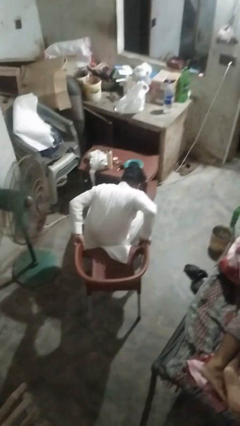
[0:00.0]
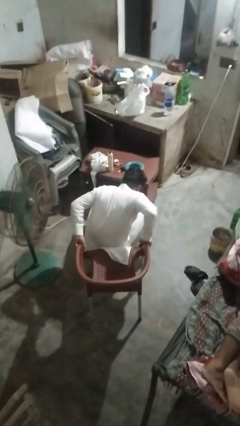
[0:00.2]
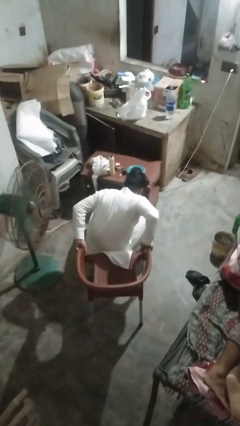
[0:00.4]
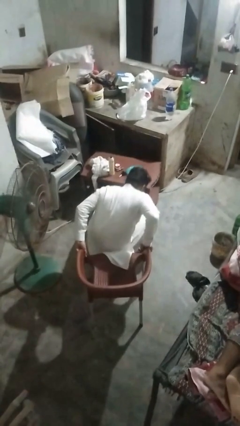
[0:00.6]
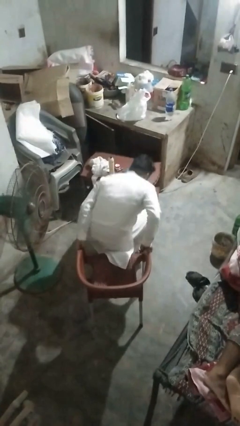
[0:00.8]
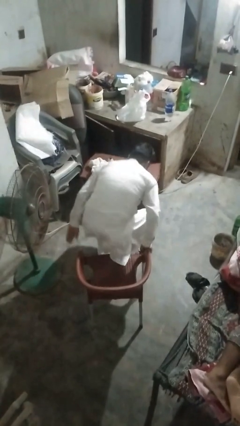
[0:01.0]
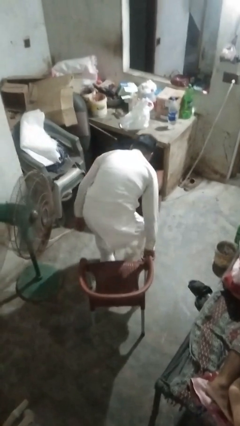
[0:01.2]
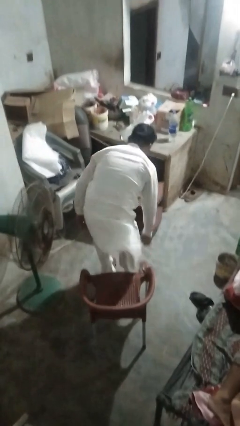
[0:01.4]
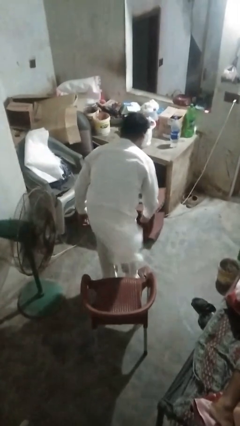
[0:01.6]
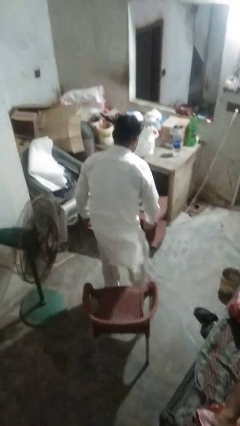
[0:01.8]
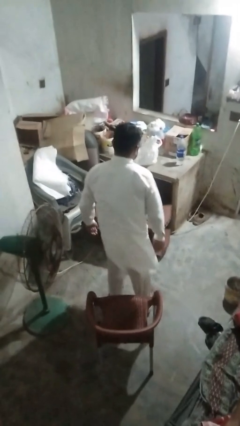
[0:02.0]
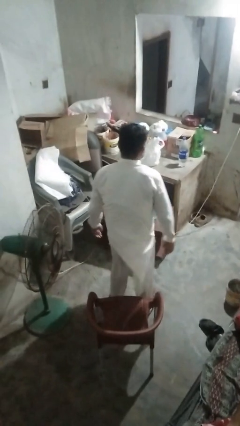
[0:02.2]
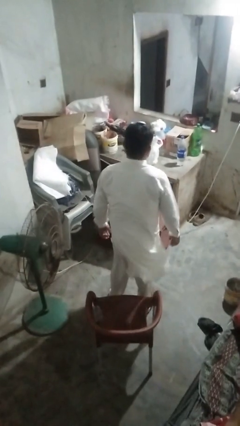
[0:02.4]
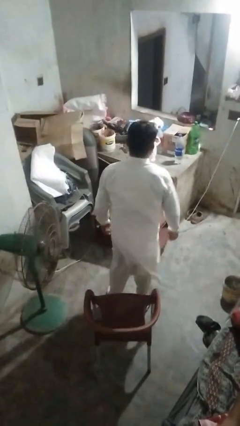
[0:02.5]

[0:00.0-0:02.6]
person stands up from floor

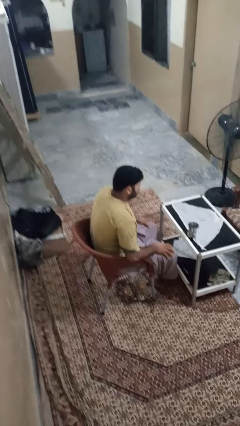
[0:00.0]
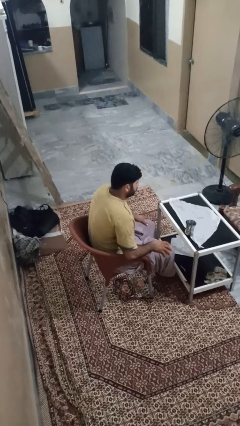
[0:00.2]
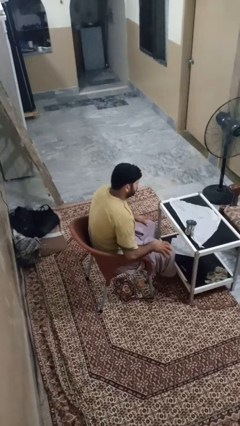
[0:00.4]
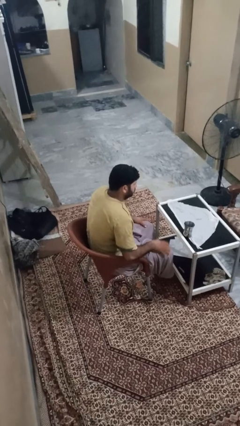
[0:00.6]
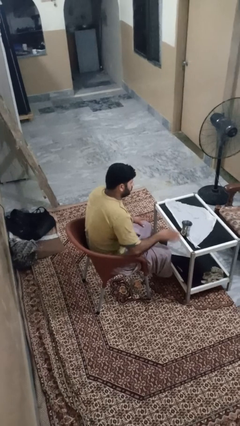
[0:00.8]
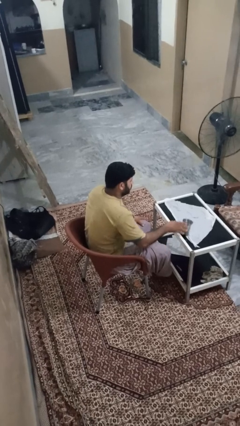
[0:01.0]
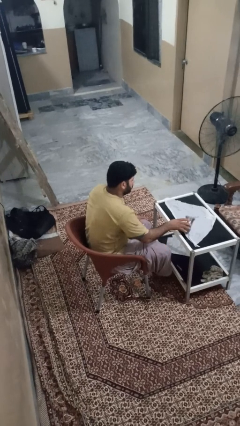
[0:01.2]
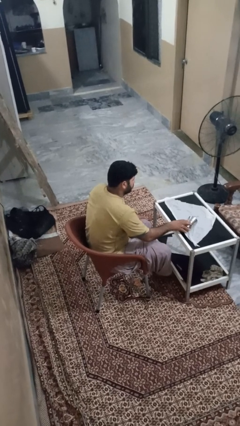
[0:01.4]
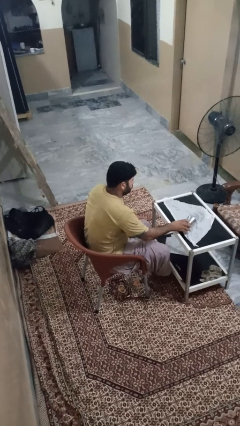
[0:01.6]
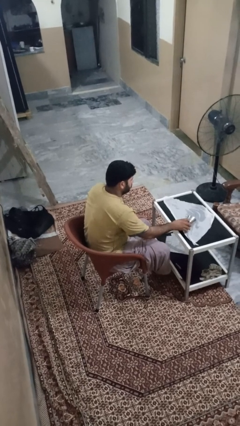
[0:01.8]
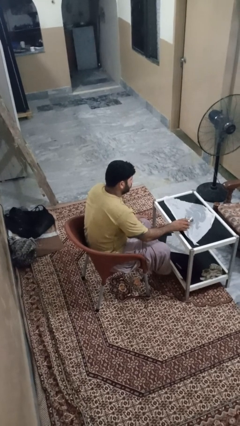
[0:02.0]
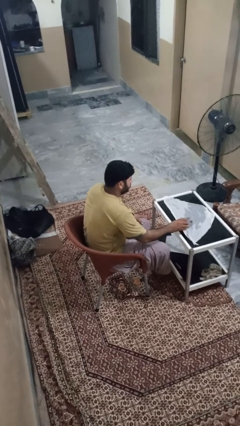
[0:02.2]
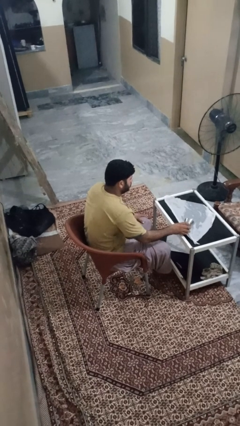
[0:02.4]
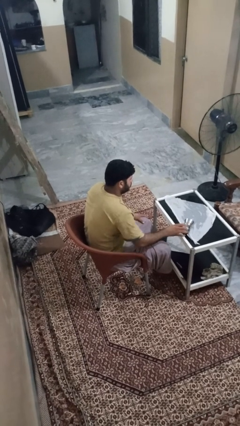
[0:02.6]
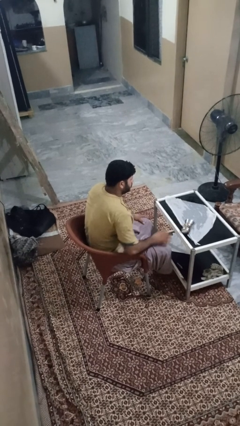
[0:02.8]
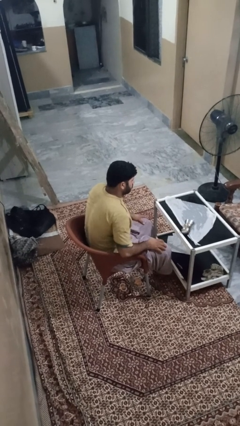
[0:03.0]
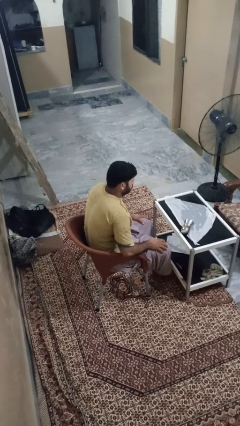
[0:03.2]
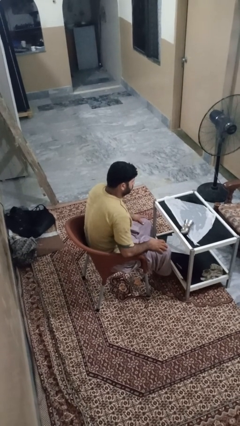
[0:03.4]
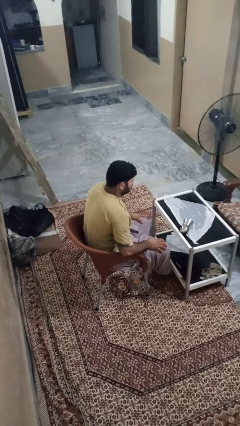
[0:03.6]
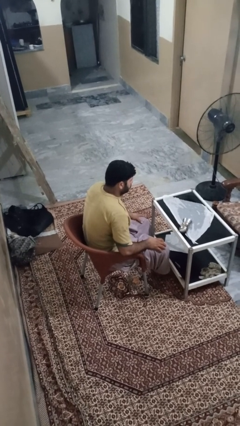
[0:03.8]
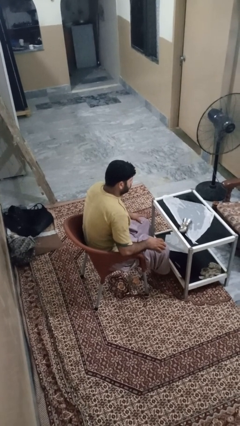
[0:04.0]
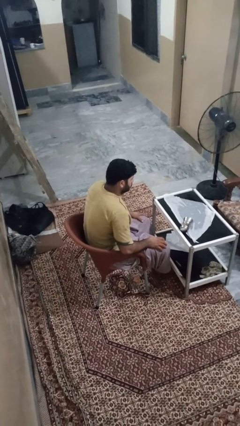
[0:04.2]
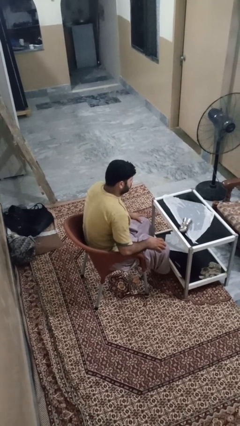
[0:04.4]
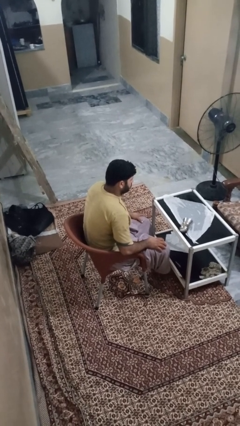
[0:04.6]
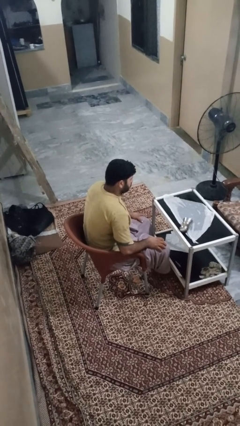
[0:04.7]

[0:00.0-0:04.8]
person spills on table

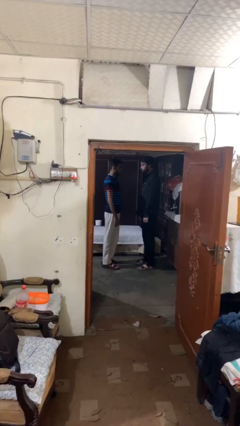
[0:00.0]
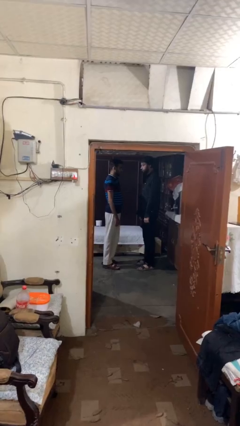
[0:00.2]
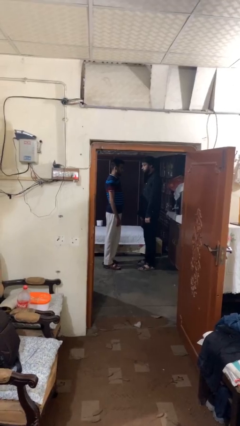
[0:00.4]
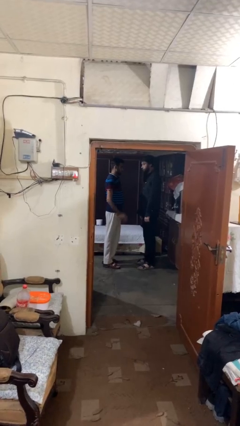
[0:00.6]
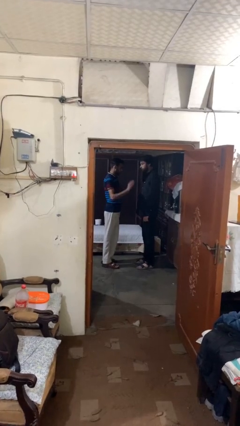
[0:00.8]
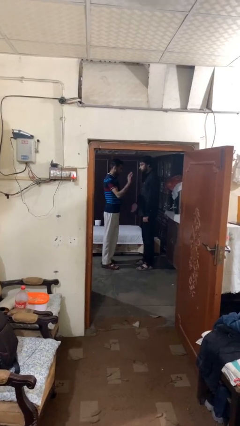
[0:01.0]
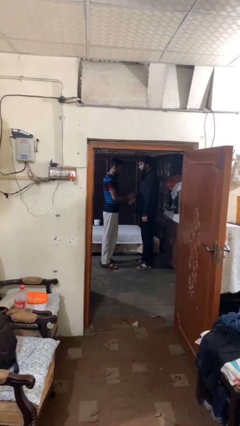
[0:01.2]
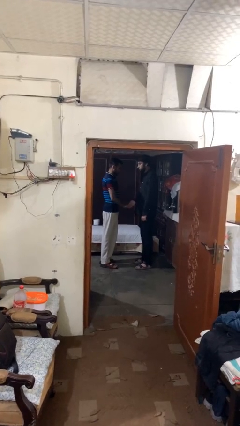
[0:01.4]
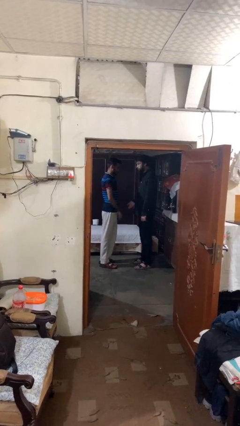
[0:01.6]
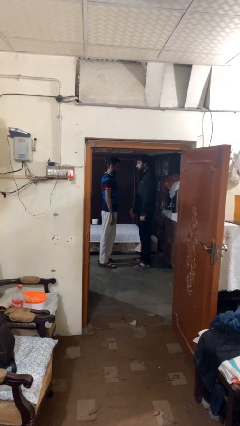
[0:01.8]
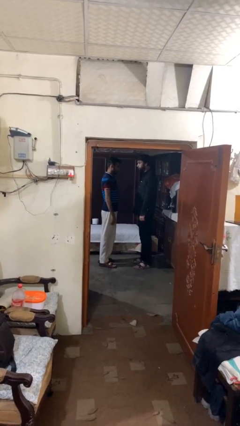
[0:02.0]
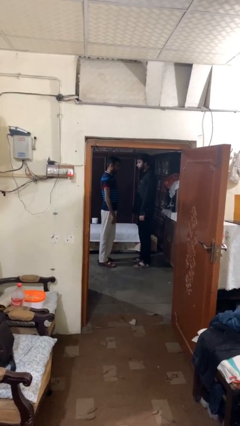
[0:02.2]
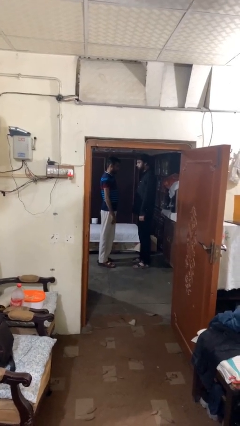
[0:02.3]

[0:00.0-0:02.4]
person highfives hand

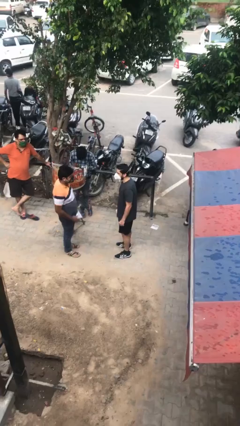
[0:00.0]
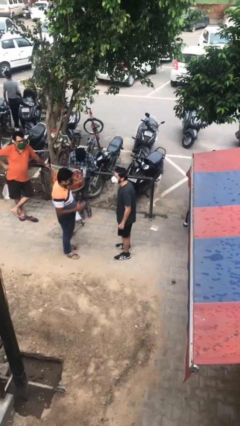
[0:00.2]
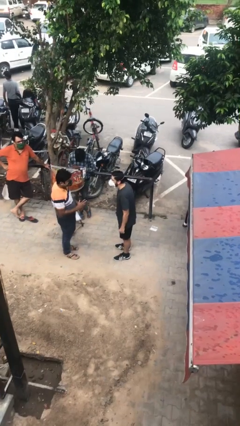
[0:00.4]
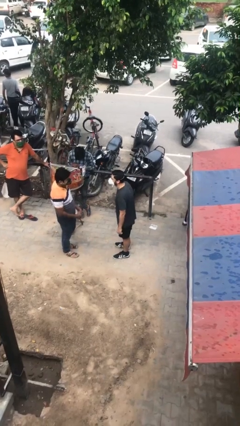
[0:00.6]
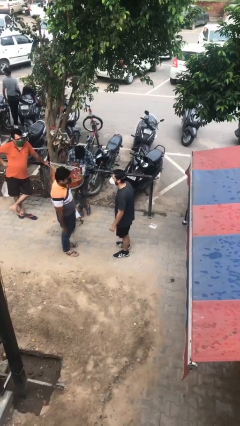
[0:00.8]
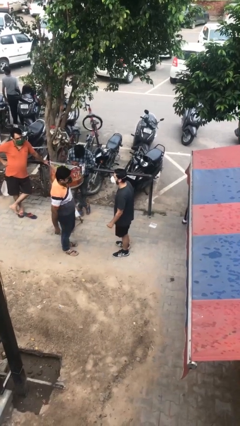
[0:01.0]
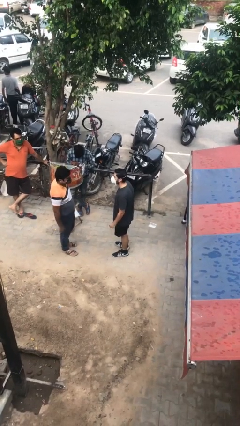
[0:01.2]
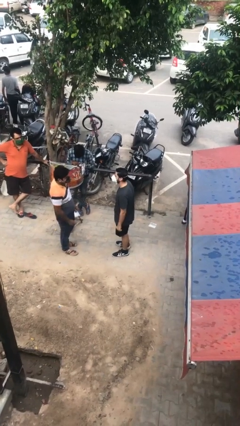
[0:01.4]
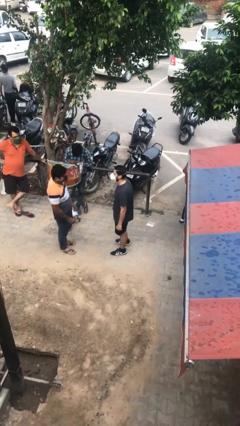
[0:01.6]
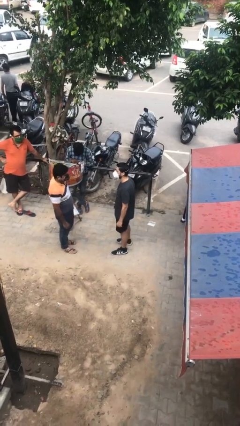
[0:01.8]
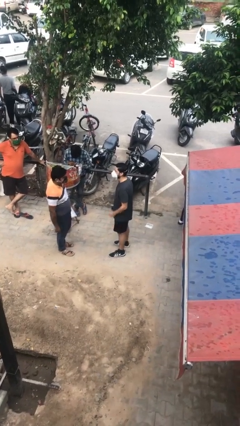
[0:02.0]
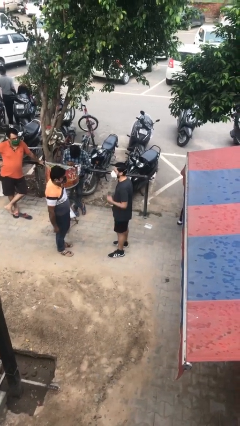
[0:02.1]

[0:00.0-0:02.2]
person talks to person

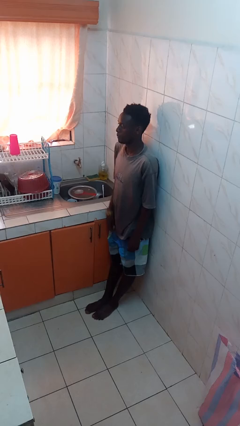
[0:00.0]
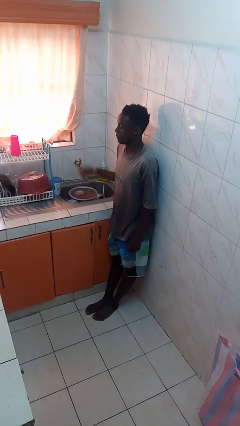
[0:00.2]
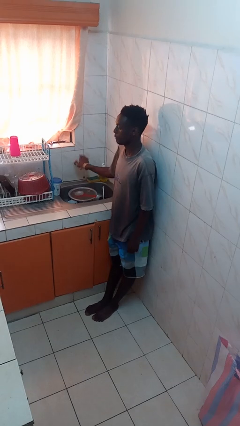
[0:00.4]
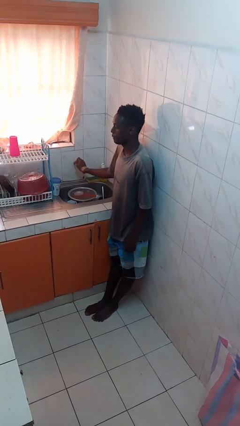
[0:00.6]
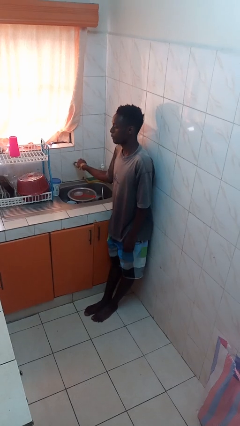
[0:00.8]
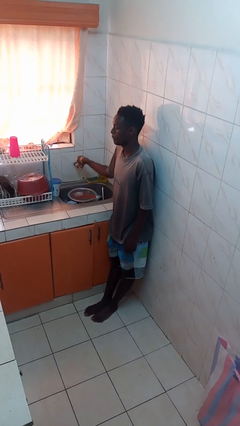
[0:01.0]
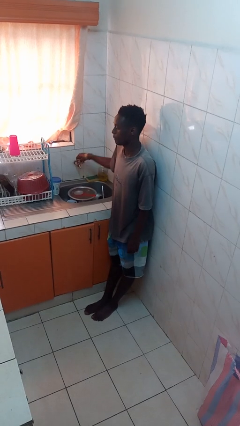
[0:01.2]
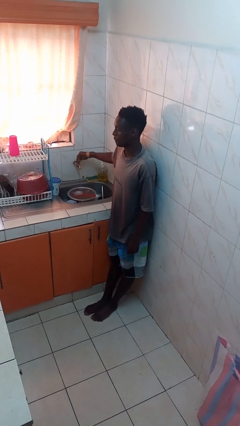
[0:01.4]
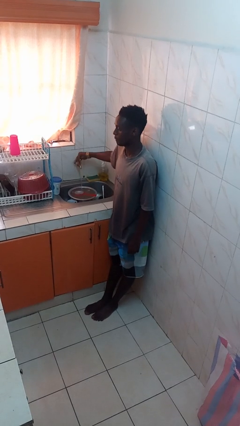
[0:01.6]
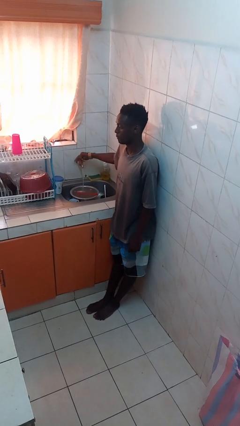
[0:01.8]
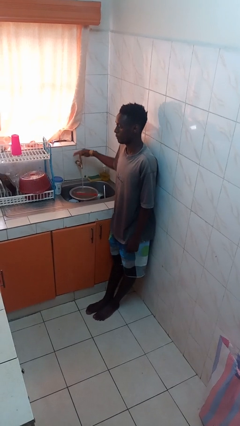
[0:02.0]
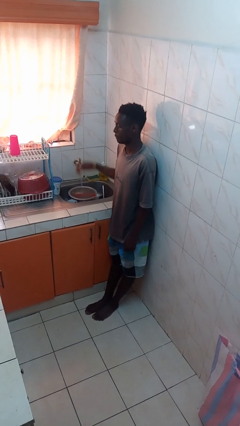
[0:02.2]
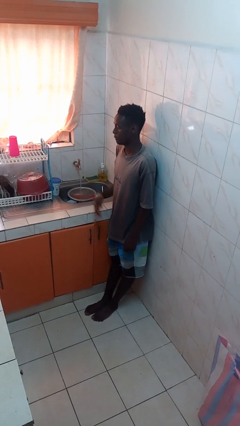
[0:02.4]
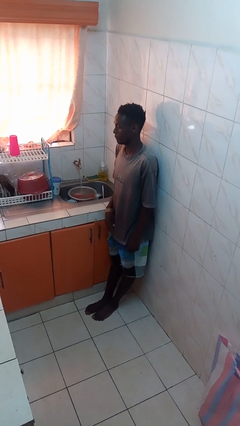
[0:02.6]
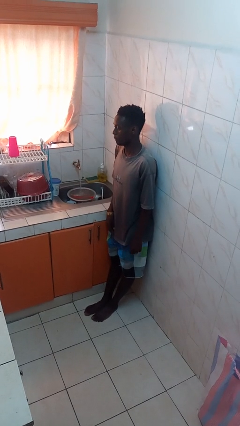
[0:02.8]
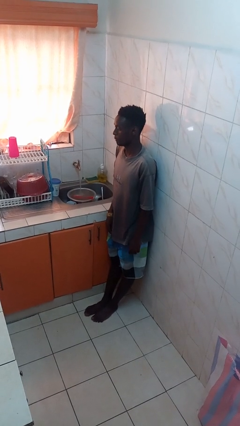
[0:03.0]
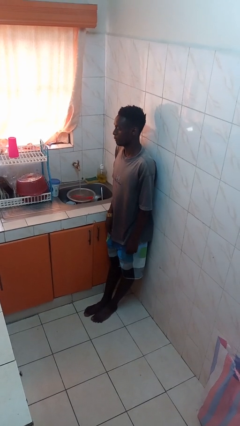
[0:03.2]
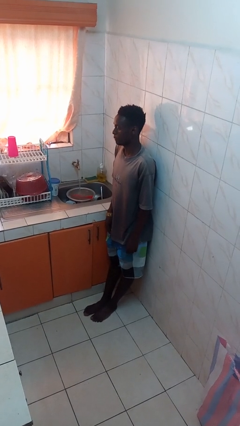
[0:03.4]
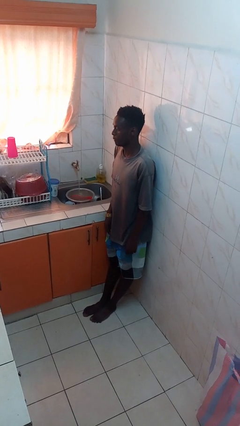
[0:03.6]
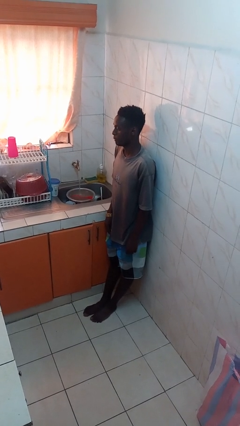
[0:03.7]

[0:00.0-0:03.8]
person turns on faucet

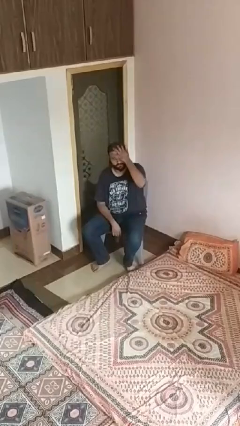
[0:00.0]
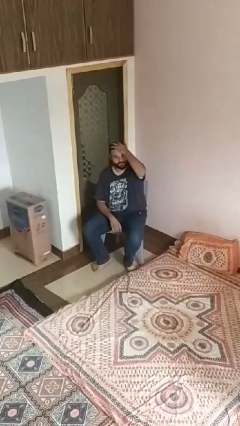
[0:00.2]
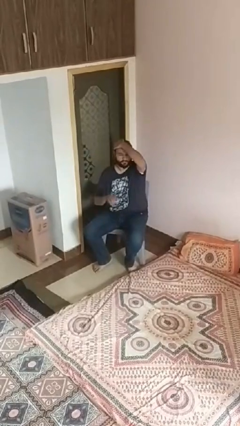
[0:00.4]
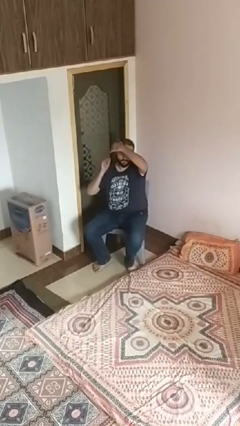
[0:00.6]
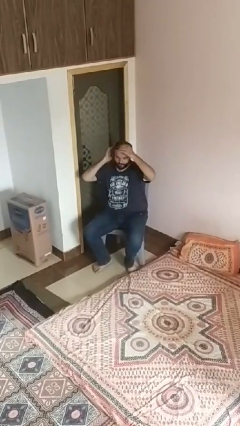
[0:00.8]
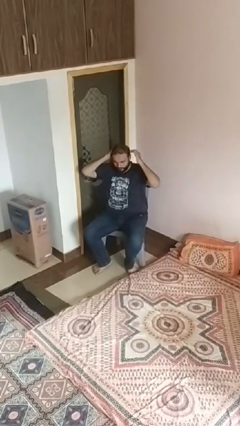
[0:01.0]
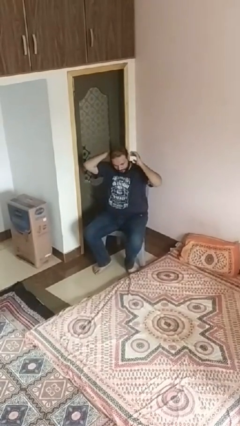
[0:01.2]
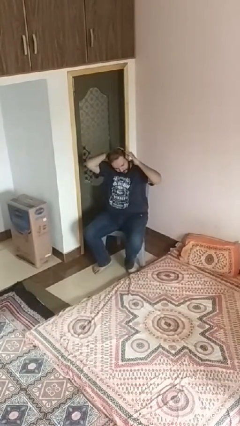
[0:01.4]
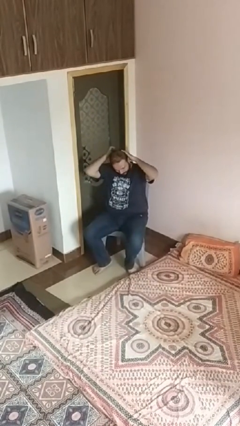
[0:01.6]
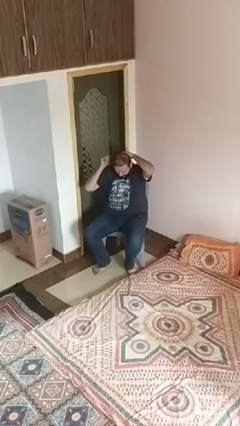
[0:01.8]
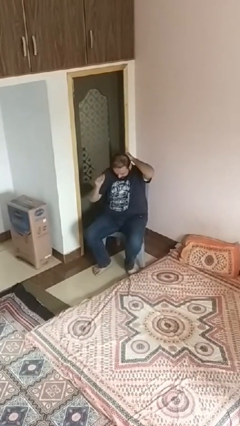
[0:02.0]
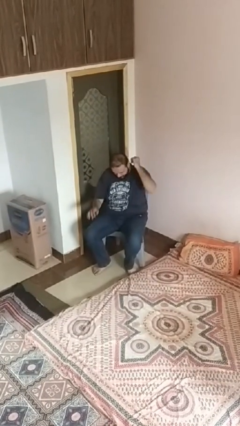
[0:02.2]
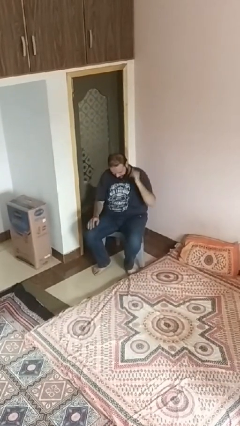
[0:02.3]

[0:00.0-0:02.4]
person strokes hair
